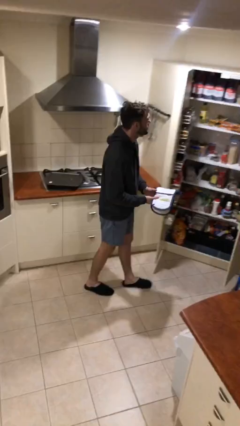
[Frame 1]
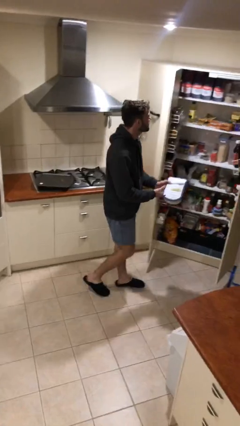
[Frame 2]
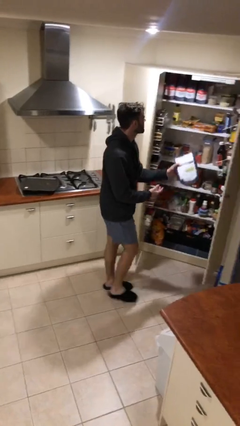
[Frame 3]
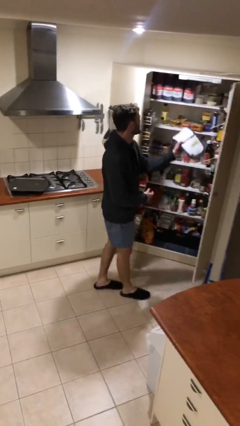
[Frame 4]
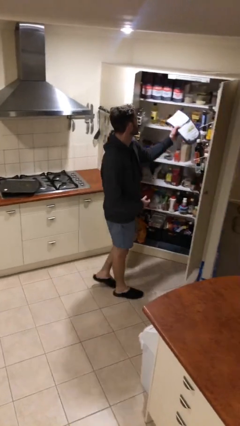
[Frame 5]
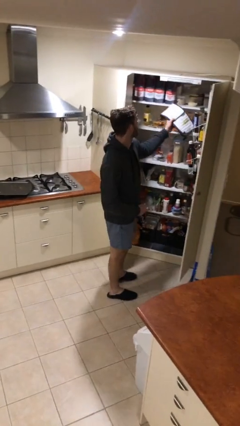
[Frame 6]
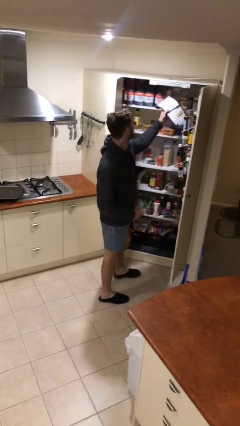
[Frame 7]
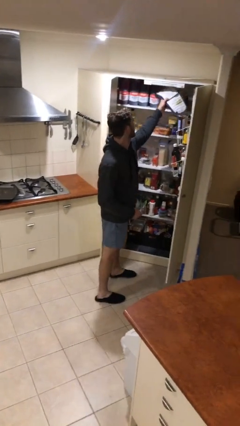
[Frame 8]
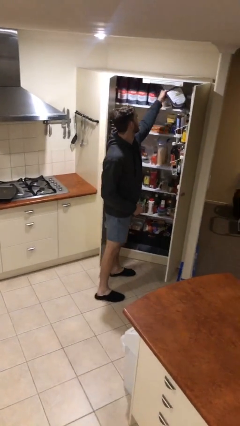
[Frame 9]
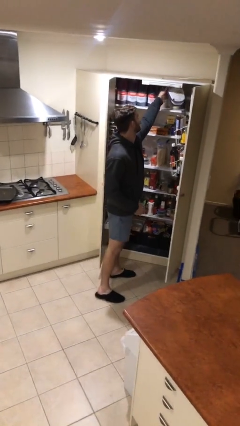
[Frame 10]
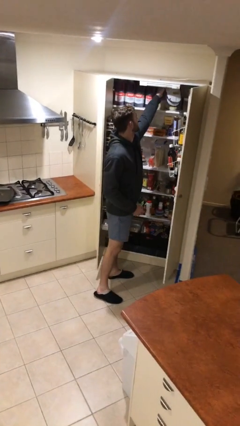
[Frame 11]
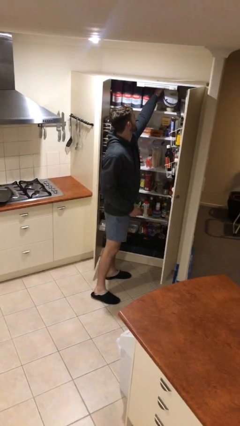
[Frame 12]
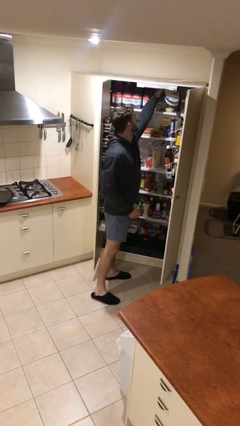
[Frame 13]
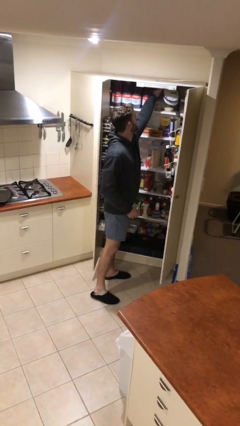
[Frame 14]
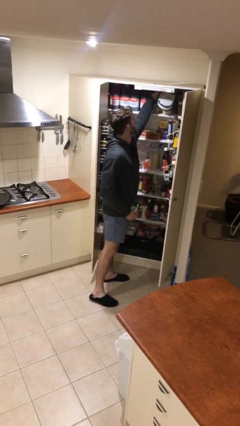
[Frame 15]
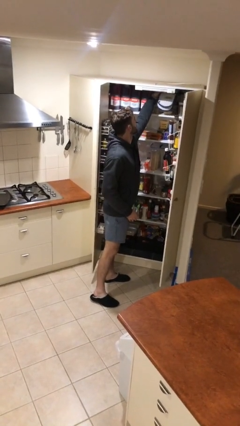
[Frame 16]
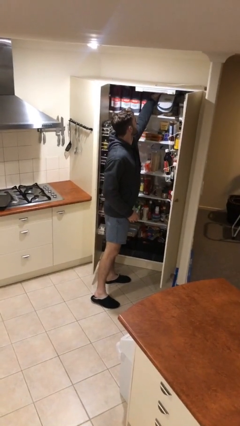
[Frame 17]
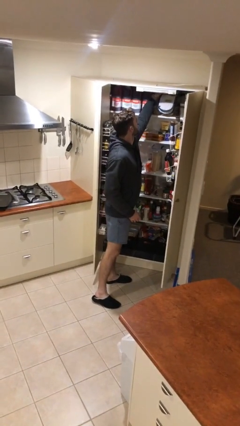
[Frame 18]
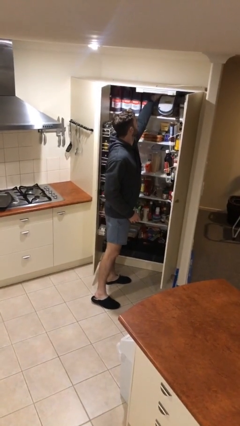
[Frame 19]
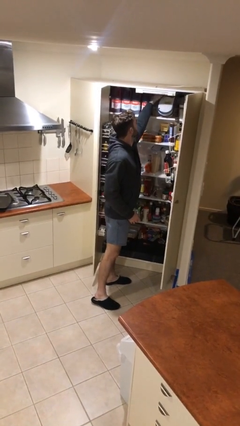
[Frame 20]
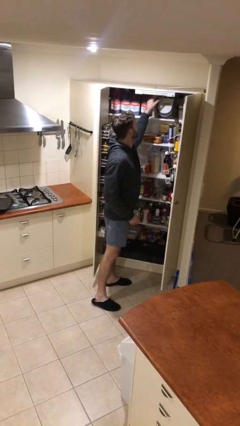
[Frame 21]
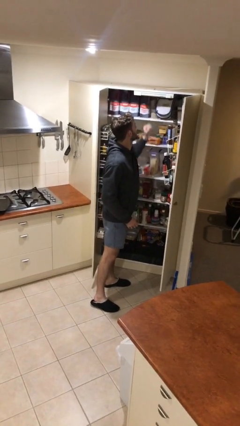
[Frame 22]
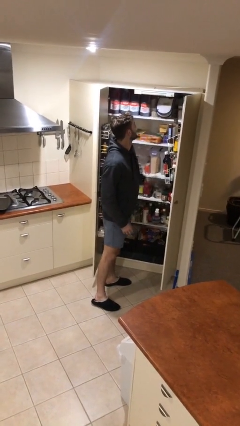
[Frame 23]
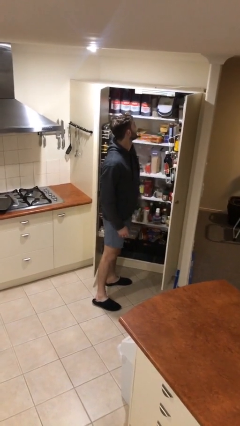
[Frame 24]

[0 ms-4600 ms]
person puts down object on shelf

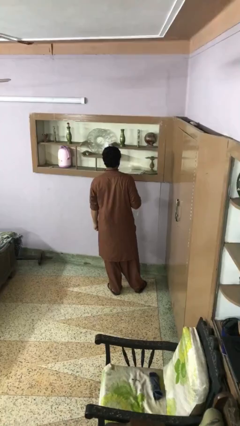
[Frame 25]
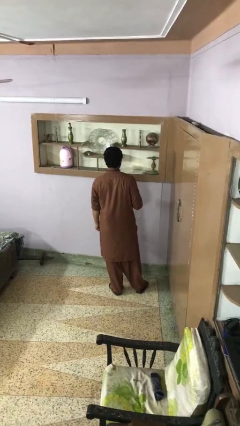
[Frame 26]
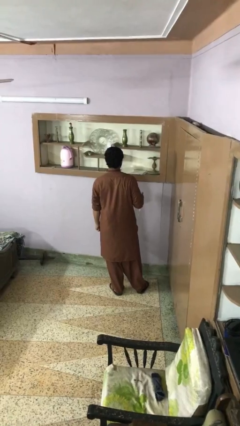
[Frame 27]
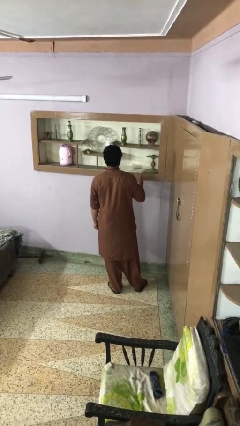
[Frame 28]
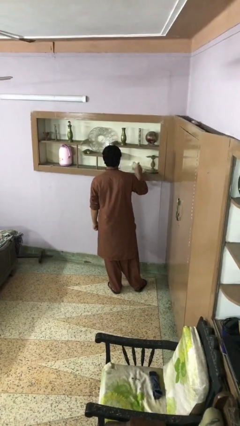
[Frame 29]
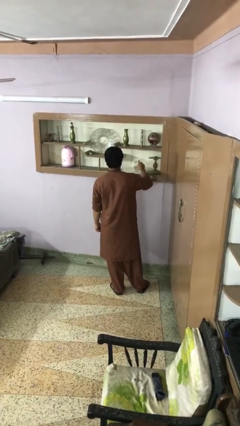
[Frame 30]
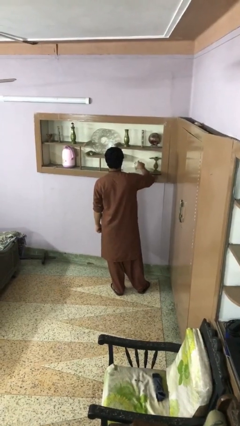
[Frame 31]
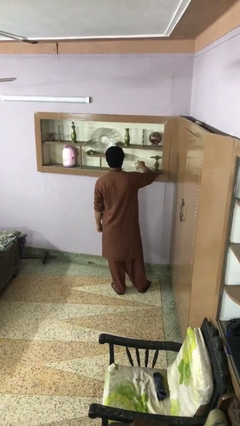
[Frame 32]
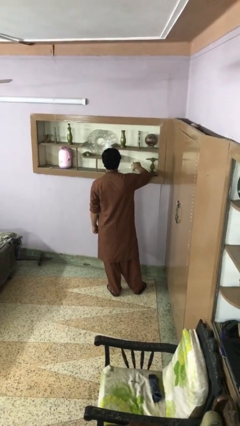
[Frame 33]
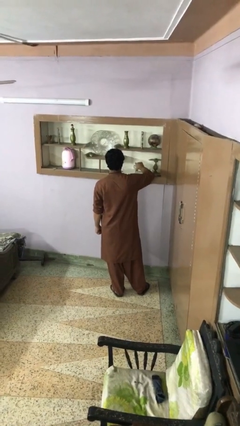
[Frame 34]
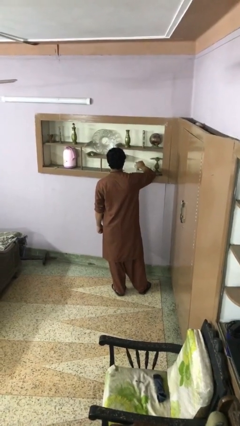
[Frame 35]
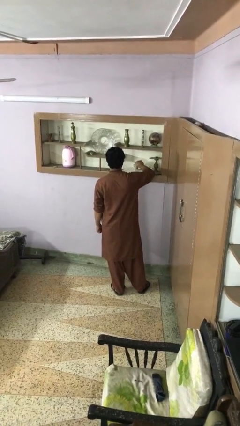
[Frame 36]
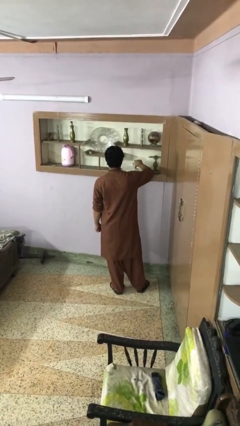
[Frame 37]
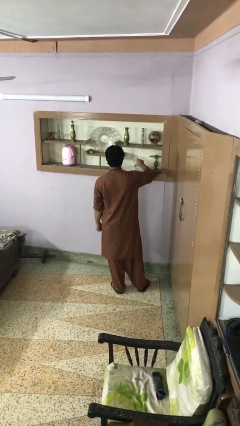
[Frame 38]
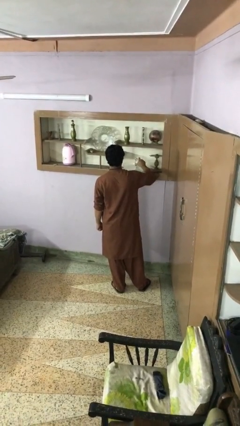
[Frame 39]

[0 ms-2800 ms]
person pours into bowl

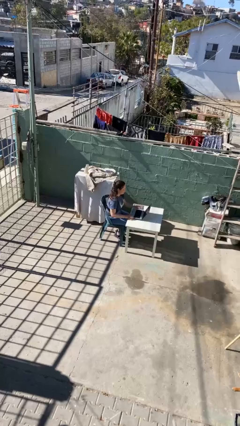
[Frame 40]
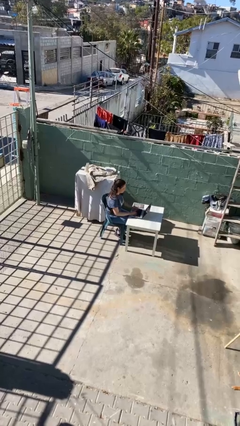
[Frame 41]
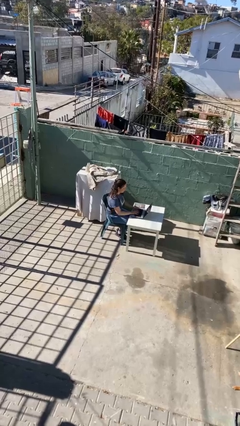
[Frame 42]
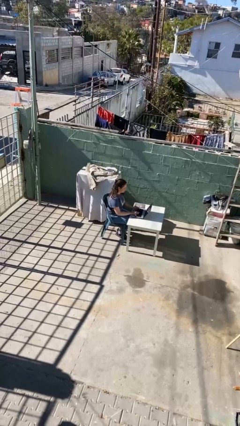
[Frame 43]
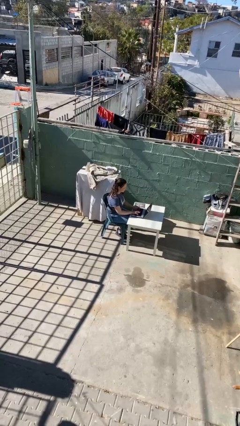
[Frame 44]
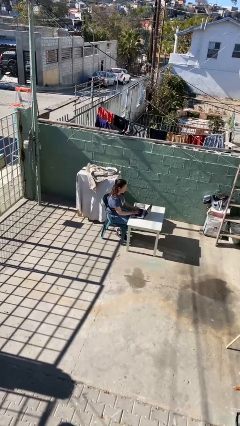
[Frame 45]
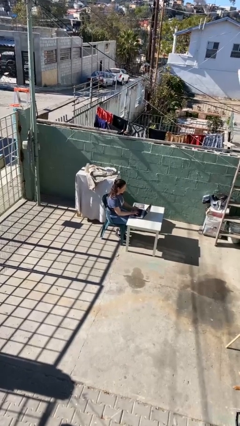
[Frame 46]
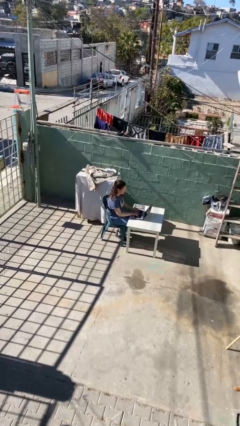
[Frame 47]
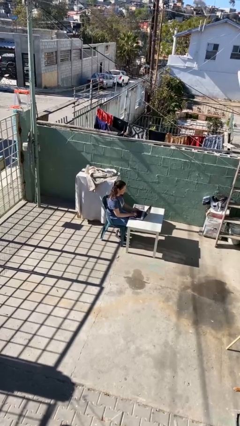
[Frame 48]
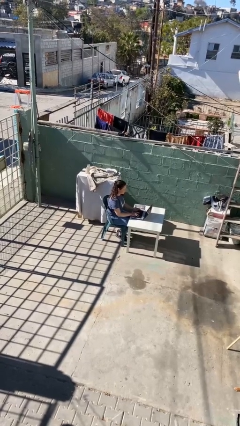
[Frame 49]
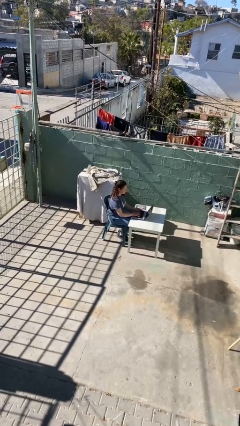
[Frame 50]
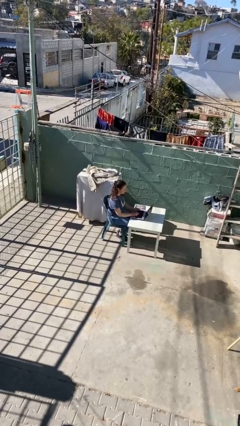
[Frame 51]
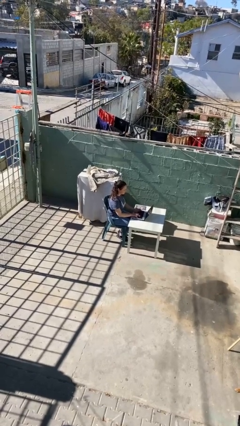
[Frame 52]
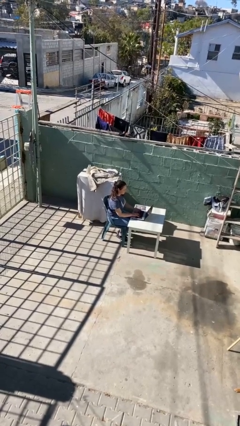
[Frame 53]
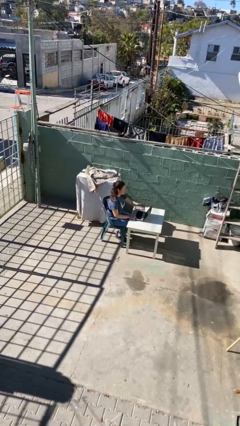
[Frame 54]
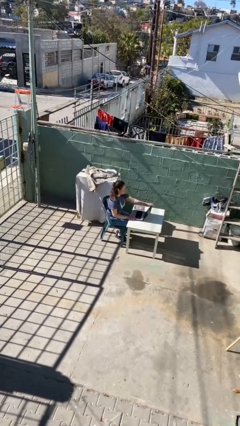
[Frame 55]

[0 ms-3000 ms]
person interacts with laptop

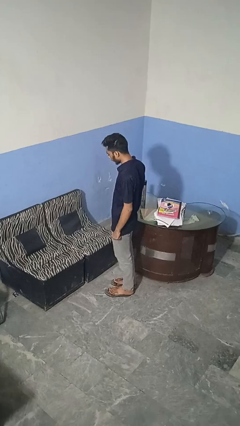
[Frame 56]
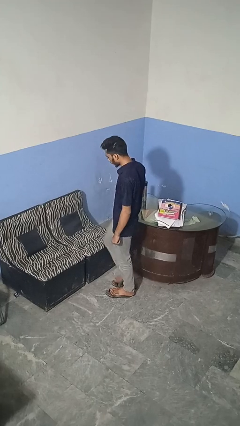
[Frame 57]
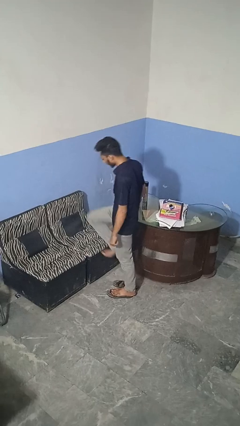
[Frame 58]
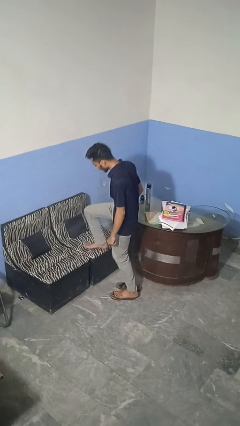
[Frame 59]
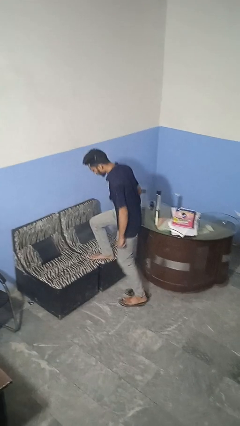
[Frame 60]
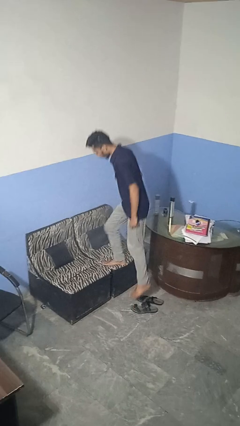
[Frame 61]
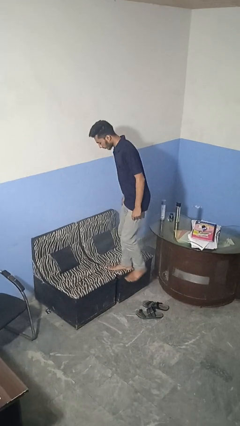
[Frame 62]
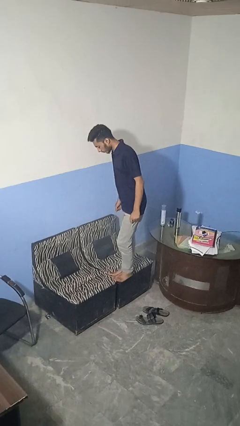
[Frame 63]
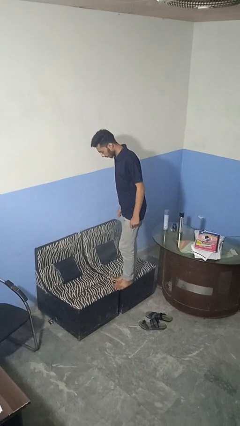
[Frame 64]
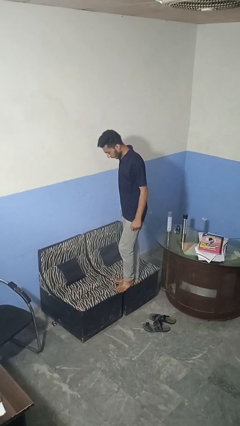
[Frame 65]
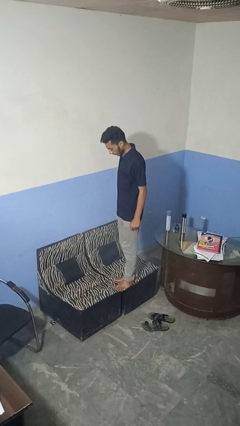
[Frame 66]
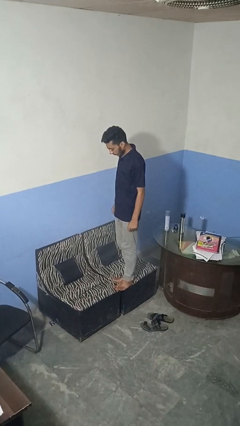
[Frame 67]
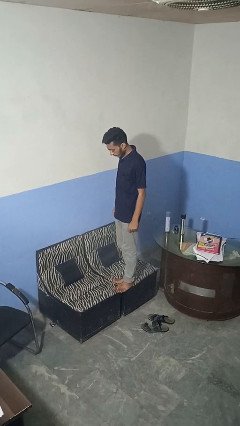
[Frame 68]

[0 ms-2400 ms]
person climbs on couch

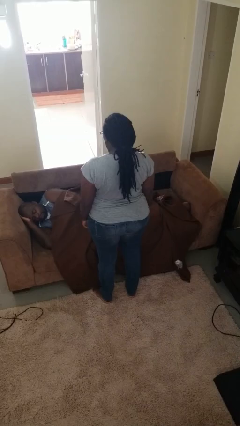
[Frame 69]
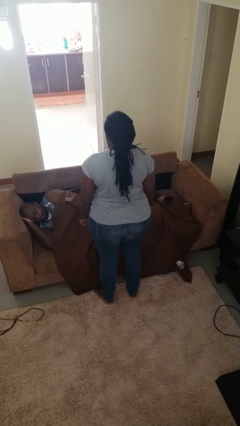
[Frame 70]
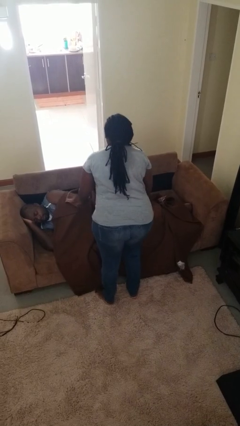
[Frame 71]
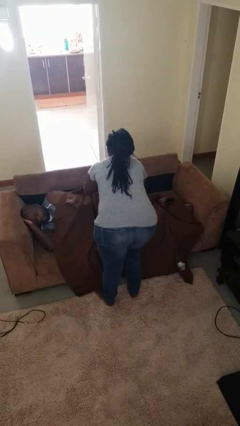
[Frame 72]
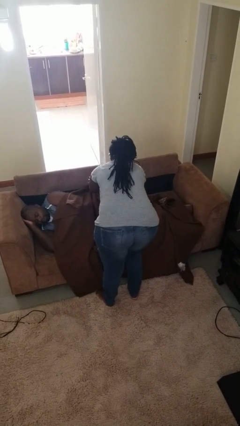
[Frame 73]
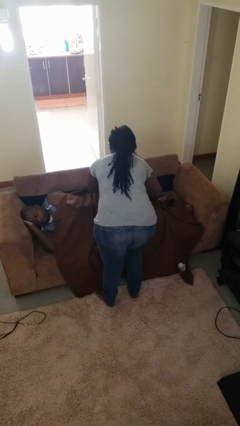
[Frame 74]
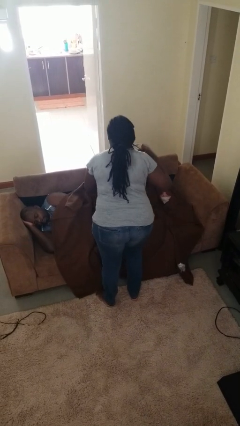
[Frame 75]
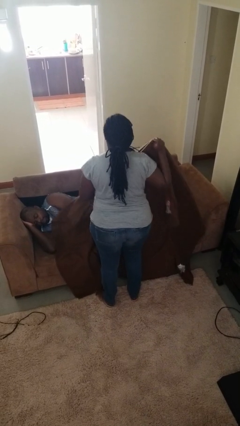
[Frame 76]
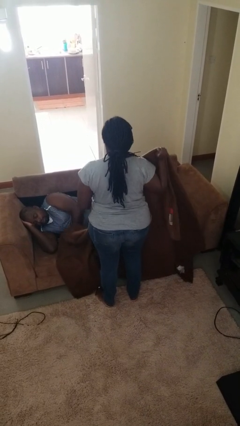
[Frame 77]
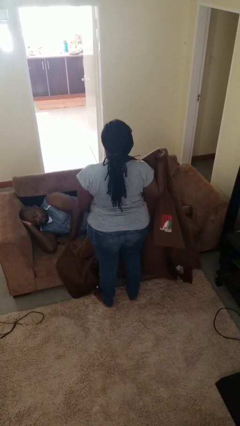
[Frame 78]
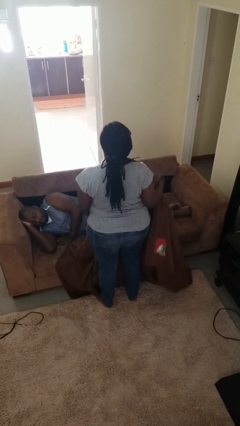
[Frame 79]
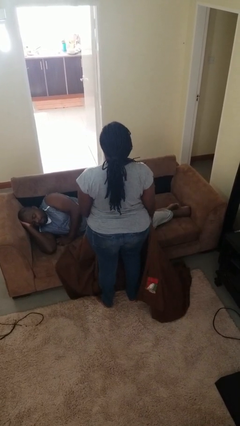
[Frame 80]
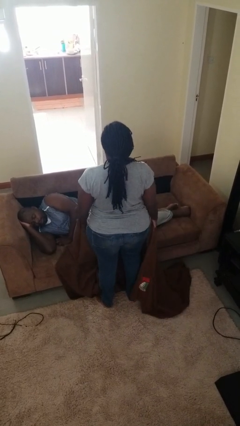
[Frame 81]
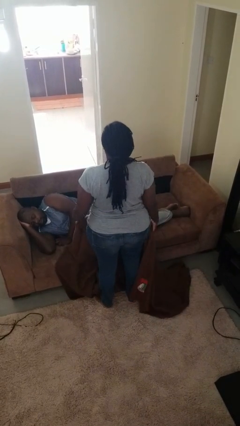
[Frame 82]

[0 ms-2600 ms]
person uncovers friend with blanket

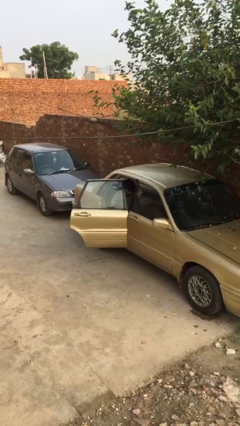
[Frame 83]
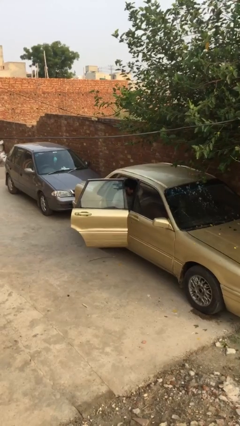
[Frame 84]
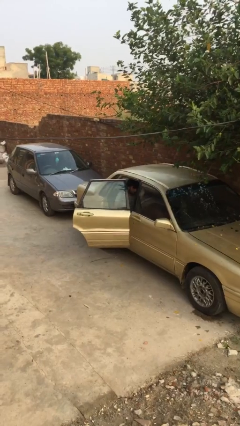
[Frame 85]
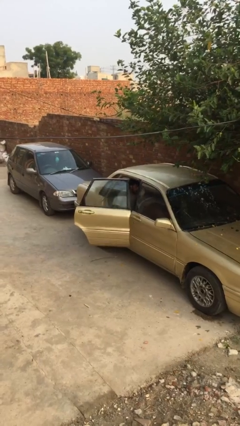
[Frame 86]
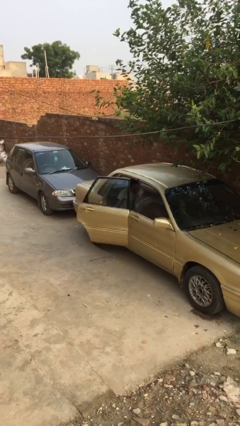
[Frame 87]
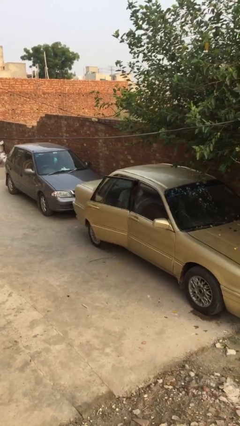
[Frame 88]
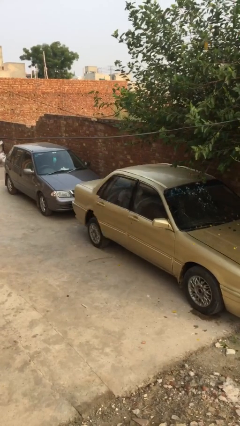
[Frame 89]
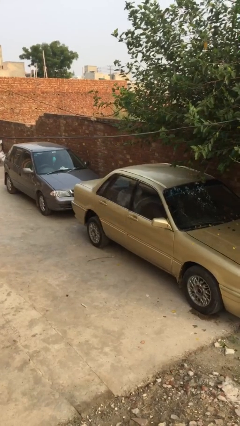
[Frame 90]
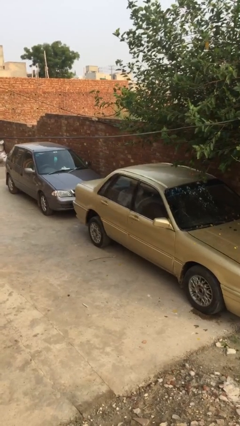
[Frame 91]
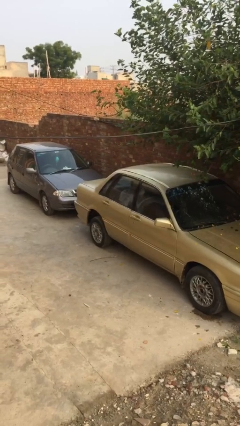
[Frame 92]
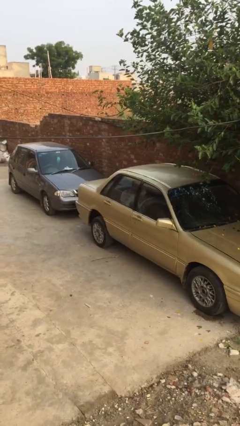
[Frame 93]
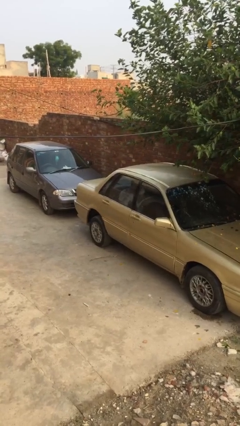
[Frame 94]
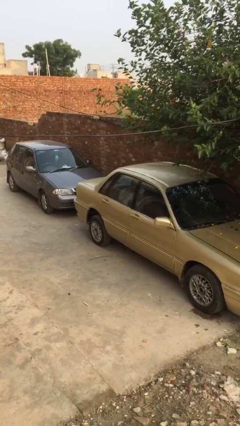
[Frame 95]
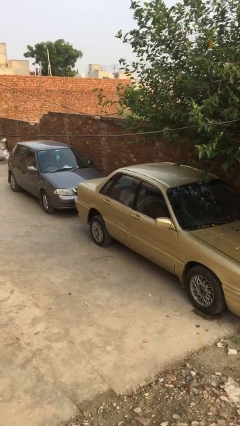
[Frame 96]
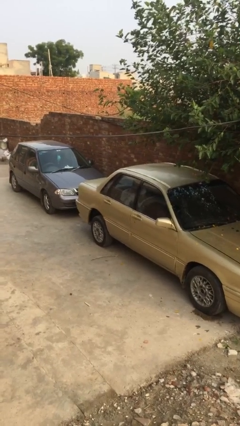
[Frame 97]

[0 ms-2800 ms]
person closes car door
